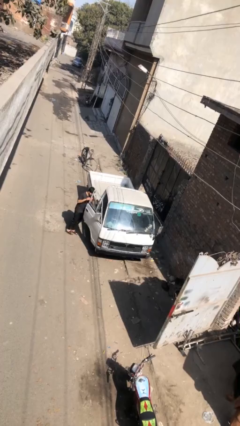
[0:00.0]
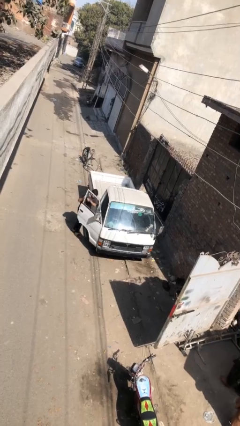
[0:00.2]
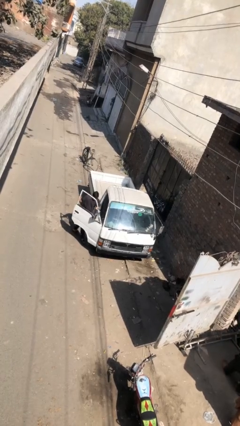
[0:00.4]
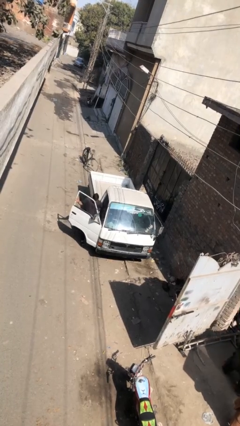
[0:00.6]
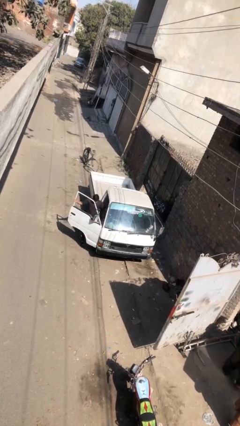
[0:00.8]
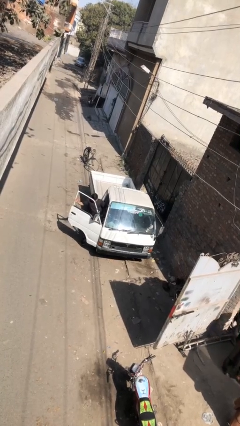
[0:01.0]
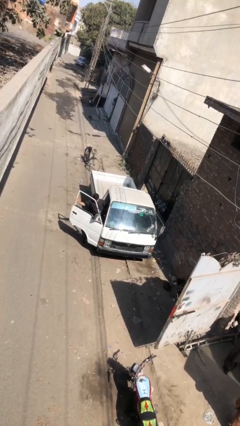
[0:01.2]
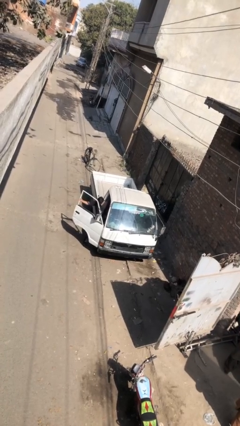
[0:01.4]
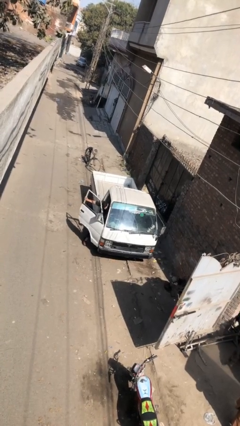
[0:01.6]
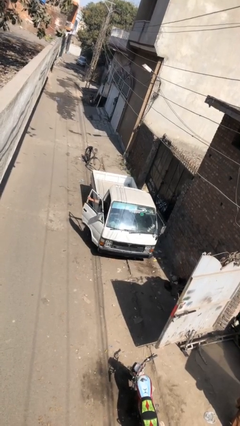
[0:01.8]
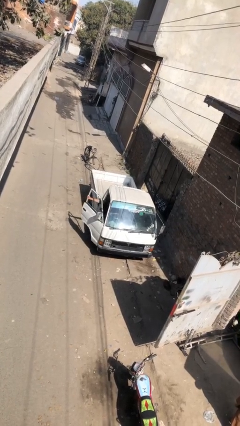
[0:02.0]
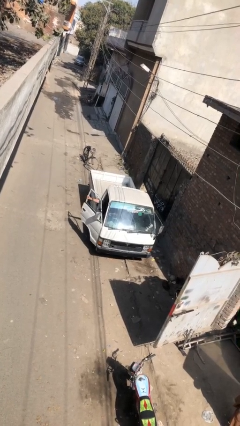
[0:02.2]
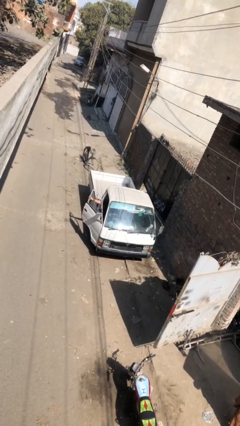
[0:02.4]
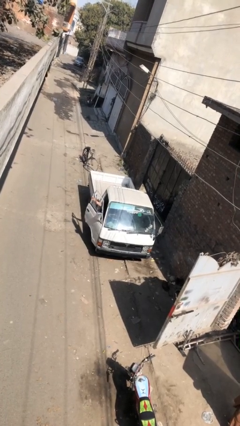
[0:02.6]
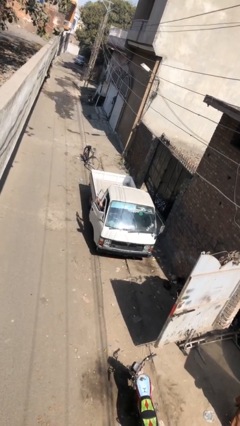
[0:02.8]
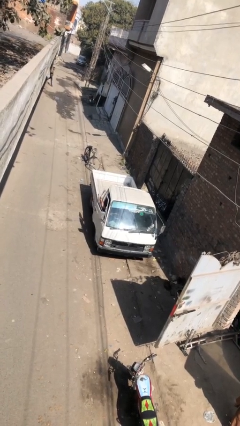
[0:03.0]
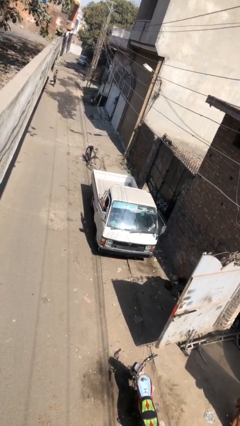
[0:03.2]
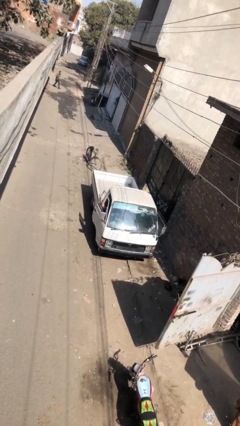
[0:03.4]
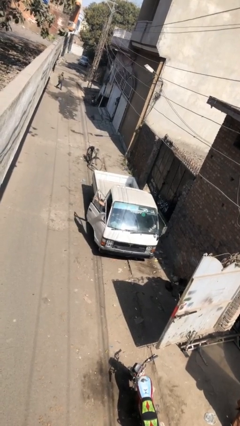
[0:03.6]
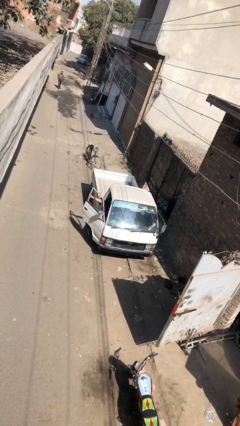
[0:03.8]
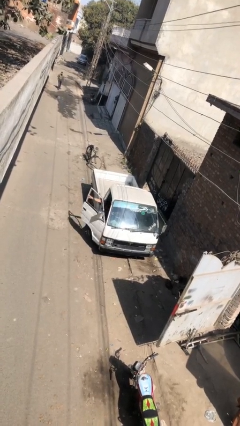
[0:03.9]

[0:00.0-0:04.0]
car picks up person

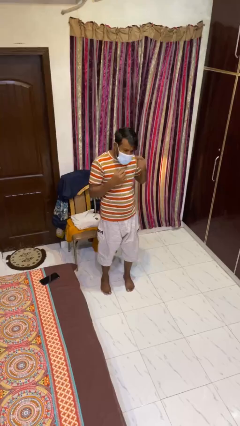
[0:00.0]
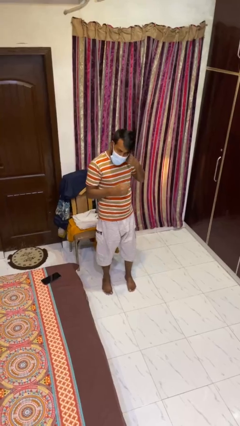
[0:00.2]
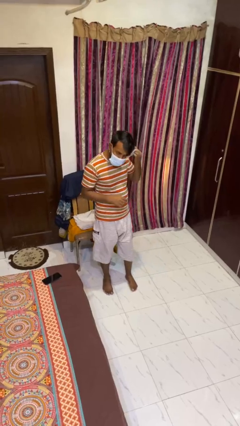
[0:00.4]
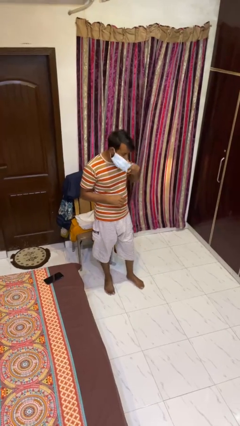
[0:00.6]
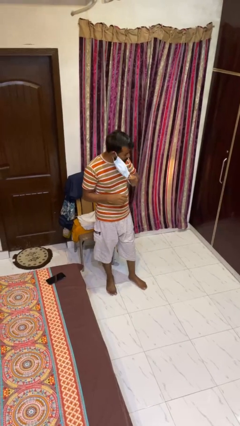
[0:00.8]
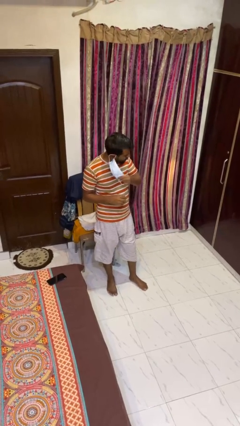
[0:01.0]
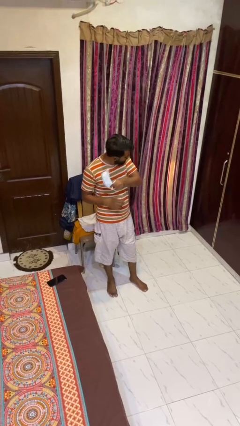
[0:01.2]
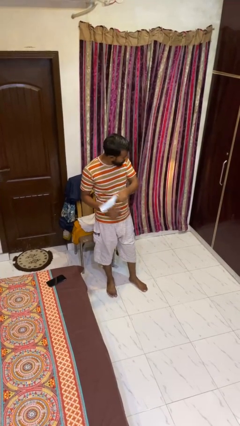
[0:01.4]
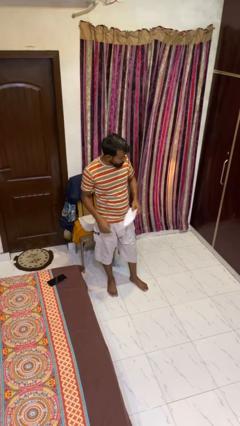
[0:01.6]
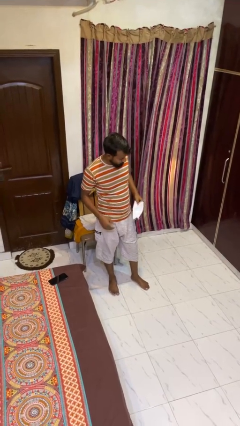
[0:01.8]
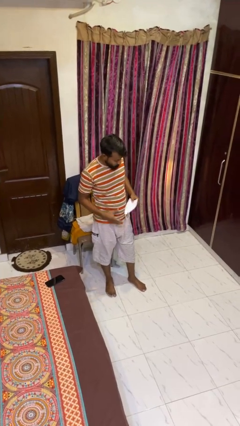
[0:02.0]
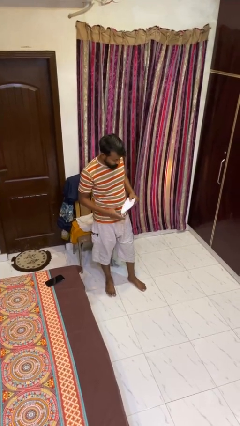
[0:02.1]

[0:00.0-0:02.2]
person takes off facemask

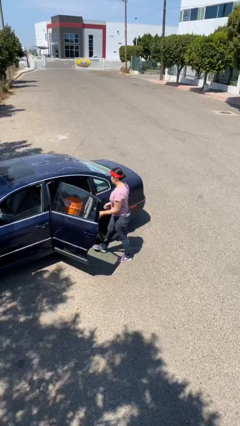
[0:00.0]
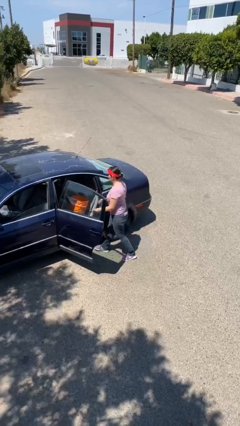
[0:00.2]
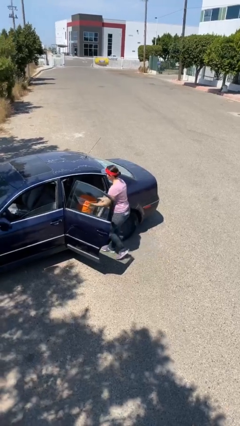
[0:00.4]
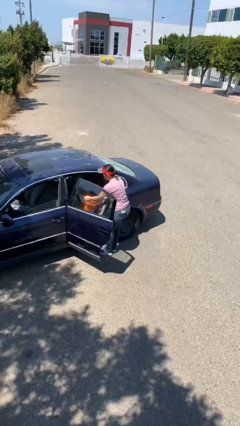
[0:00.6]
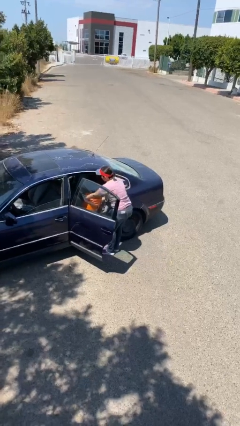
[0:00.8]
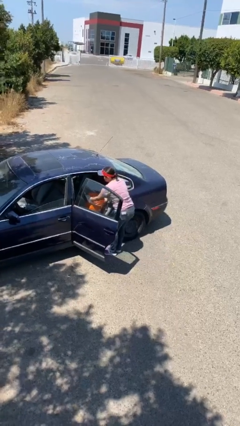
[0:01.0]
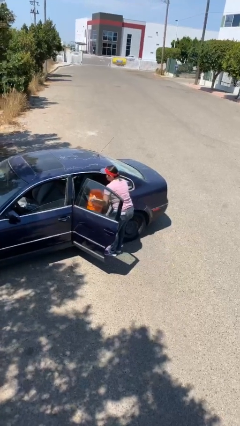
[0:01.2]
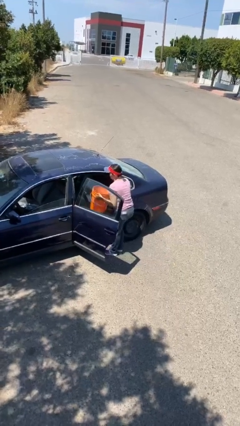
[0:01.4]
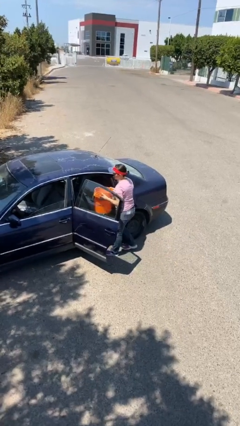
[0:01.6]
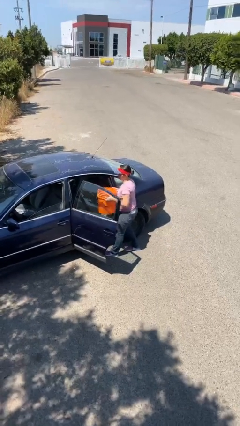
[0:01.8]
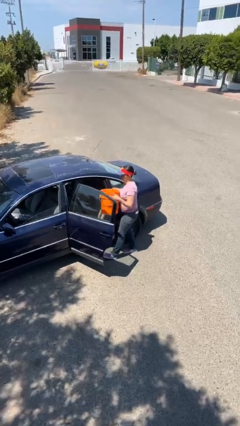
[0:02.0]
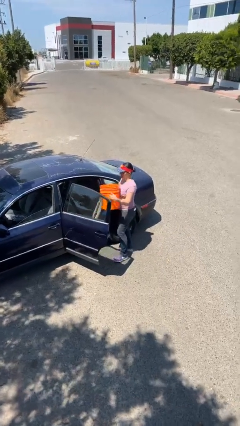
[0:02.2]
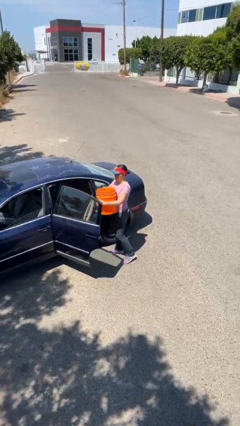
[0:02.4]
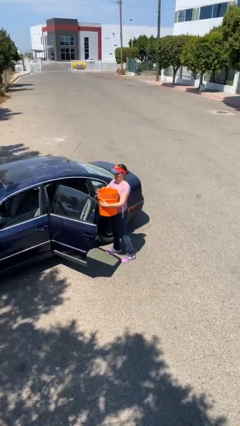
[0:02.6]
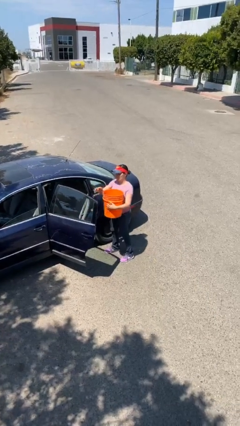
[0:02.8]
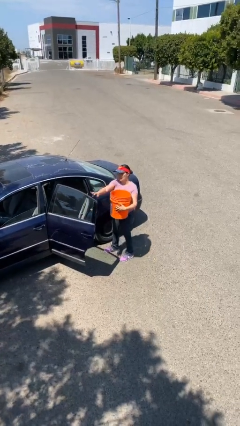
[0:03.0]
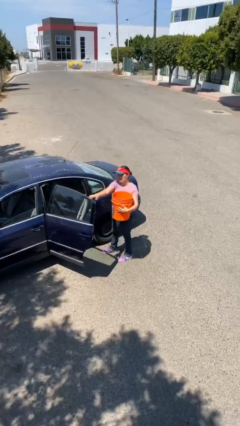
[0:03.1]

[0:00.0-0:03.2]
person unloads car

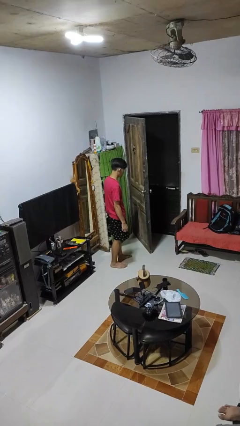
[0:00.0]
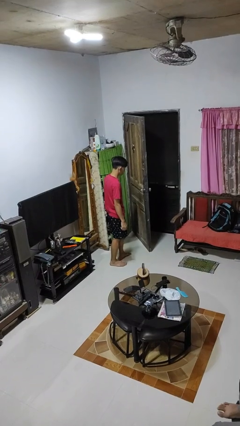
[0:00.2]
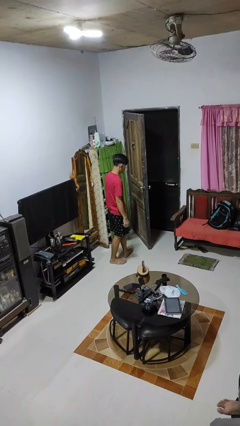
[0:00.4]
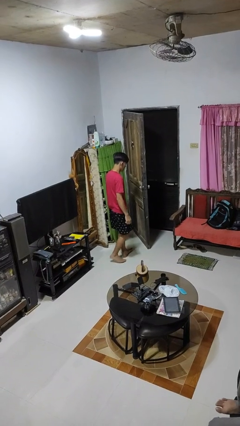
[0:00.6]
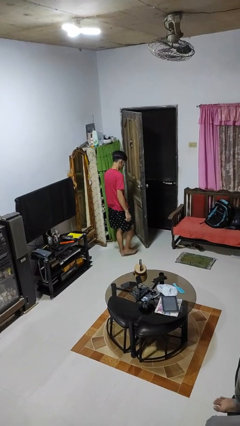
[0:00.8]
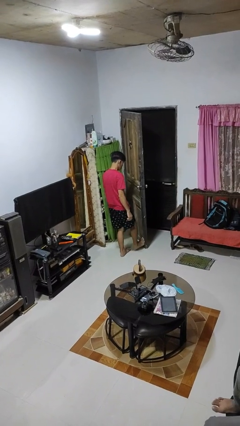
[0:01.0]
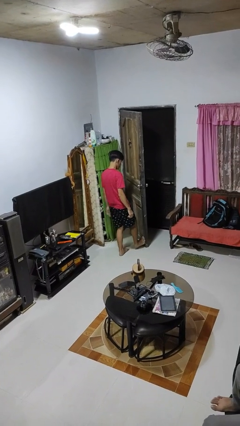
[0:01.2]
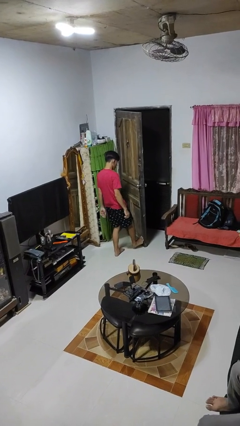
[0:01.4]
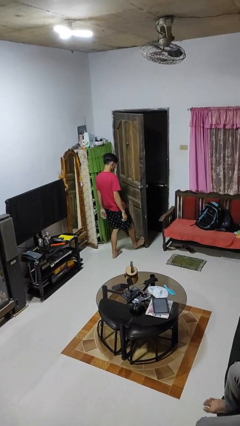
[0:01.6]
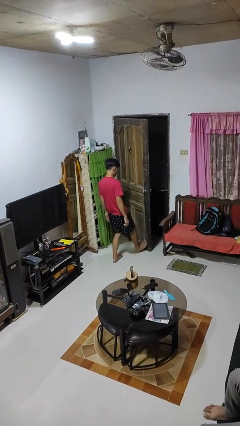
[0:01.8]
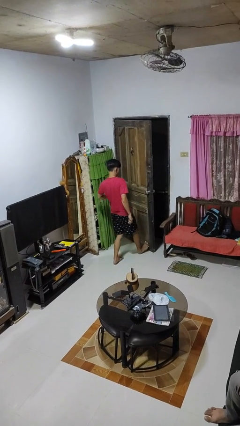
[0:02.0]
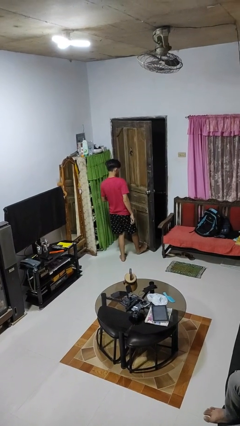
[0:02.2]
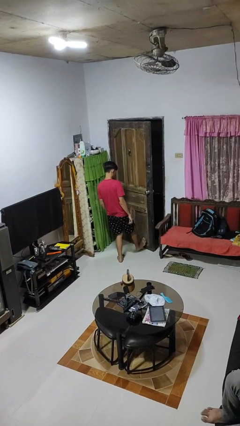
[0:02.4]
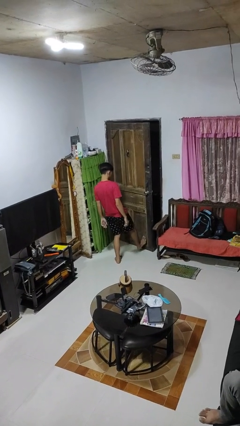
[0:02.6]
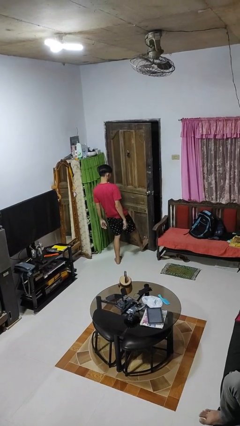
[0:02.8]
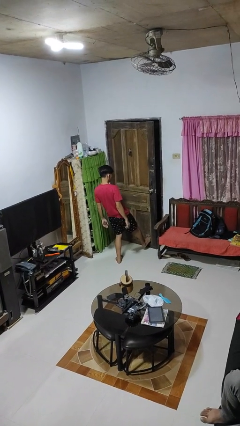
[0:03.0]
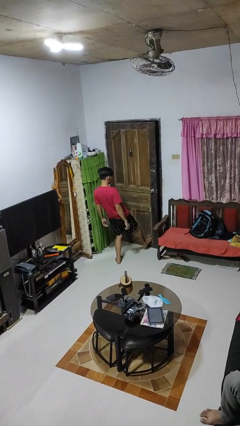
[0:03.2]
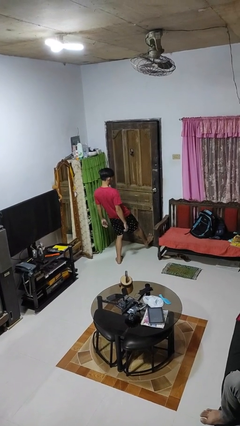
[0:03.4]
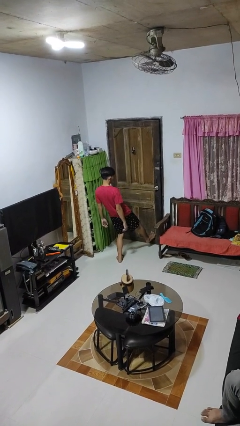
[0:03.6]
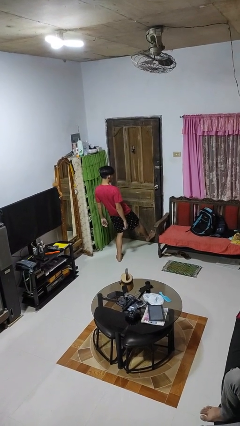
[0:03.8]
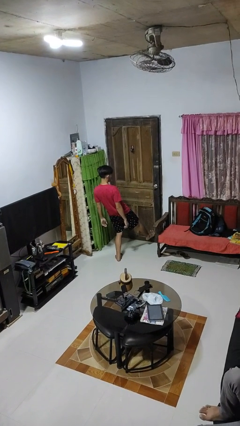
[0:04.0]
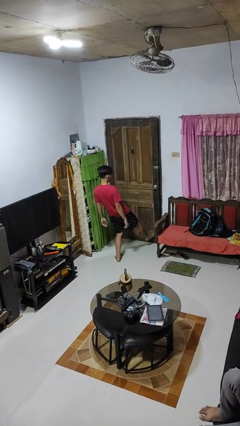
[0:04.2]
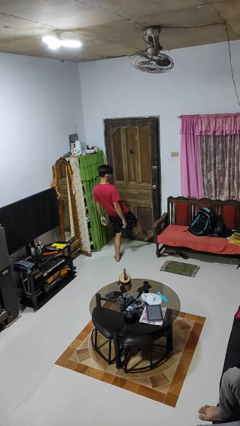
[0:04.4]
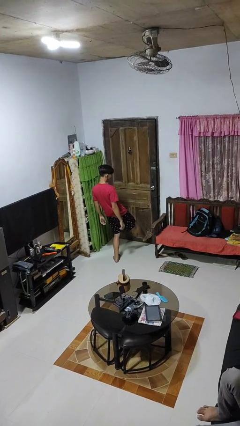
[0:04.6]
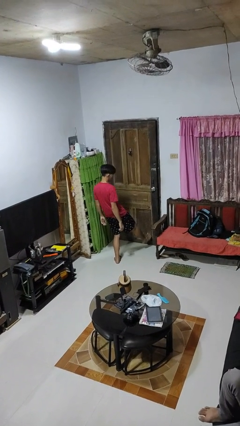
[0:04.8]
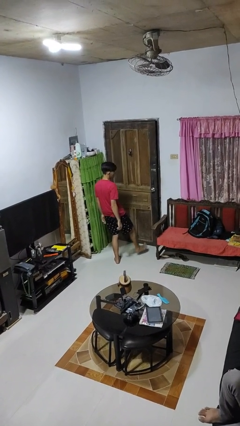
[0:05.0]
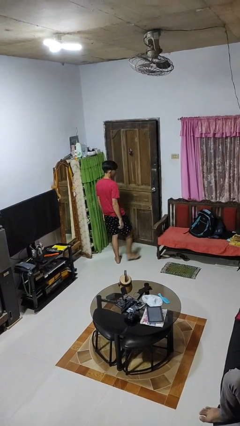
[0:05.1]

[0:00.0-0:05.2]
person closes door with foot

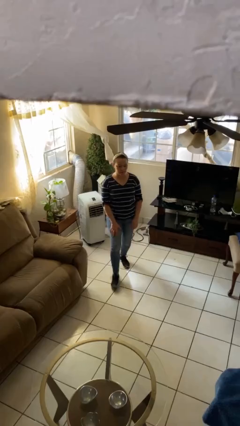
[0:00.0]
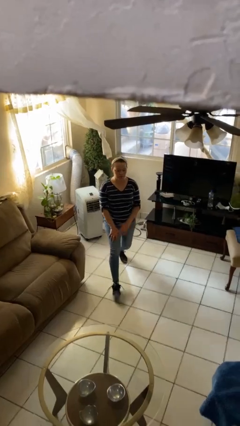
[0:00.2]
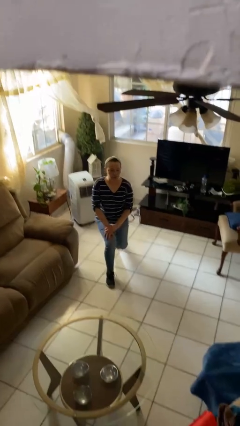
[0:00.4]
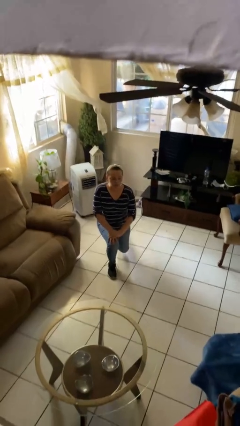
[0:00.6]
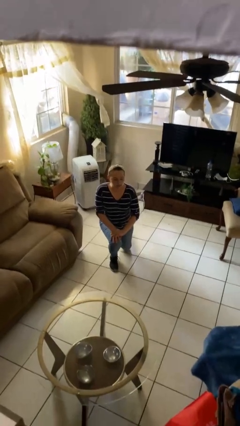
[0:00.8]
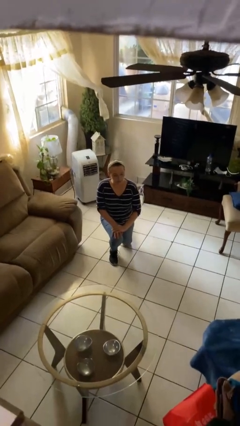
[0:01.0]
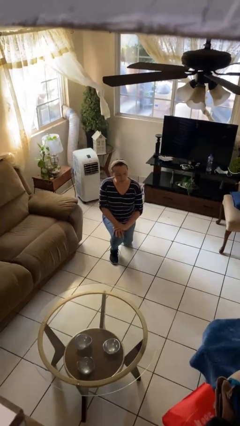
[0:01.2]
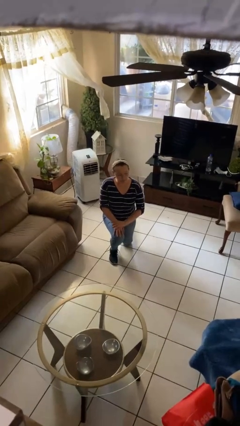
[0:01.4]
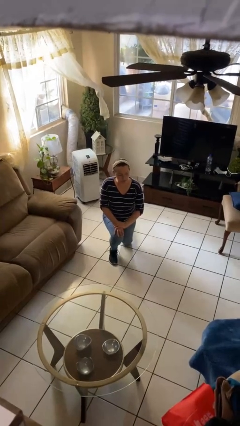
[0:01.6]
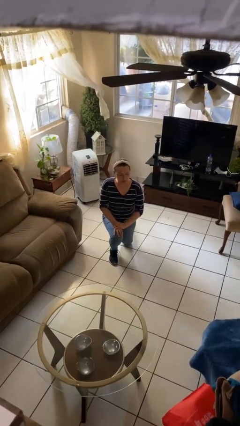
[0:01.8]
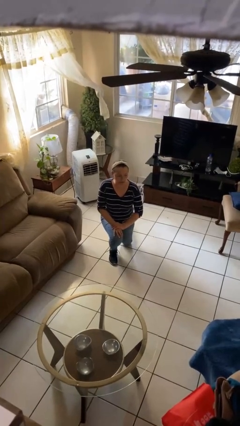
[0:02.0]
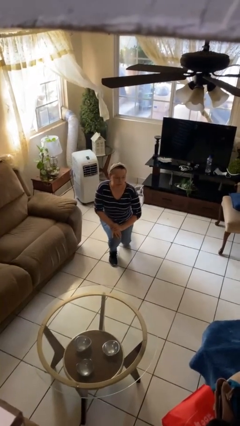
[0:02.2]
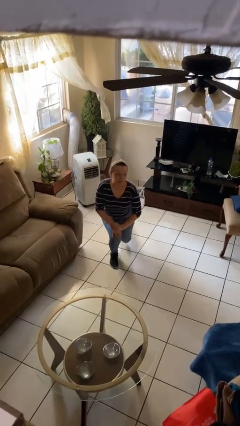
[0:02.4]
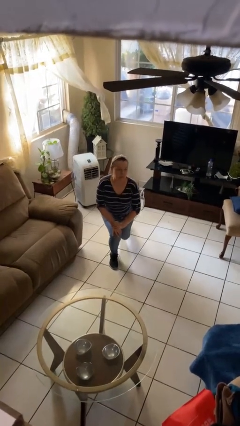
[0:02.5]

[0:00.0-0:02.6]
person kneels

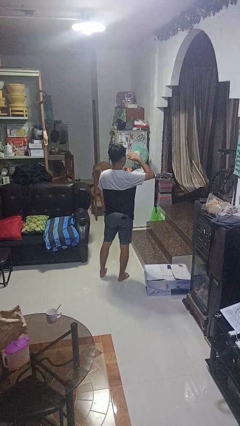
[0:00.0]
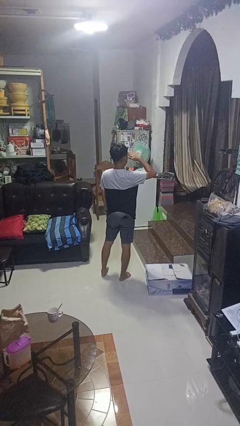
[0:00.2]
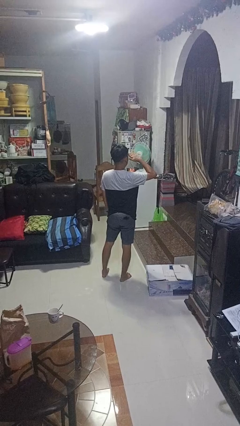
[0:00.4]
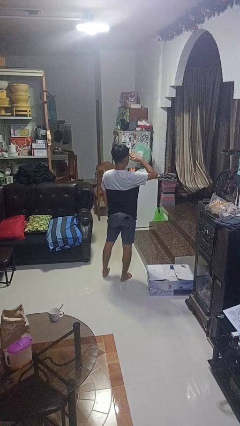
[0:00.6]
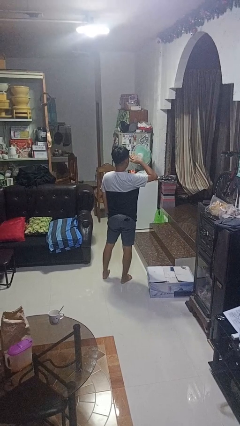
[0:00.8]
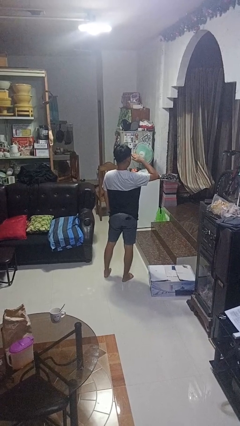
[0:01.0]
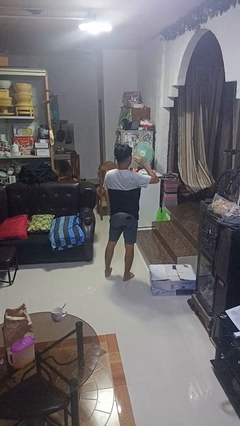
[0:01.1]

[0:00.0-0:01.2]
person salutes
